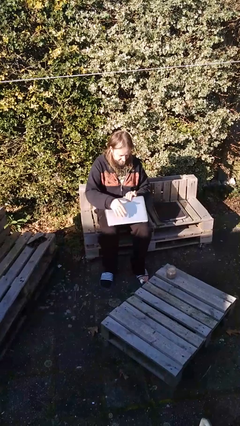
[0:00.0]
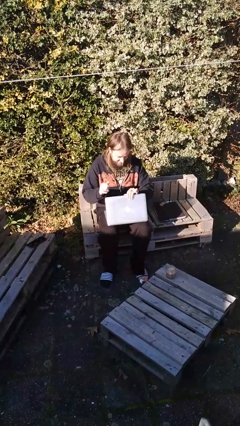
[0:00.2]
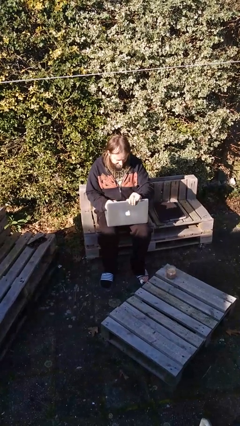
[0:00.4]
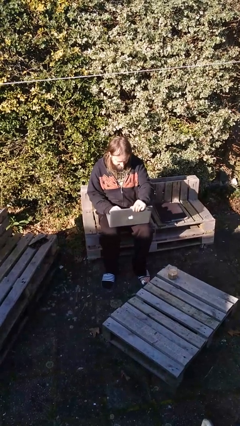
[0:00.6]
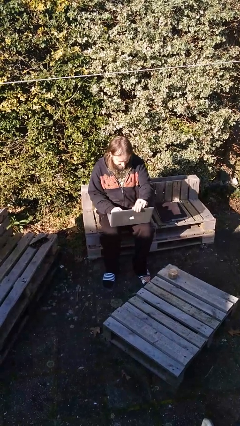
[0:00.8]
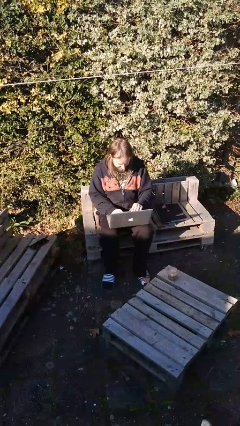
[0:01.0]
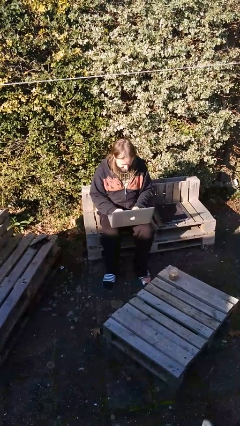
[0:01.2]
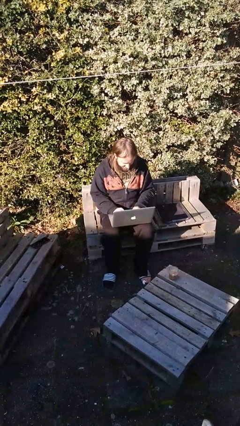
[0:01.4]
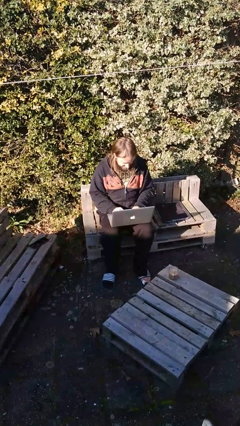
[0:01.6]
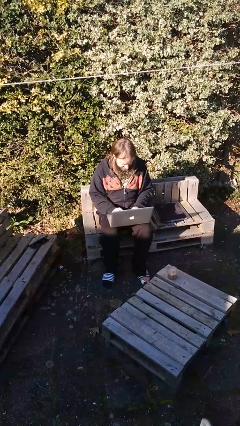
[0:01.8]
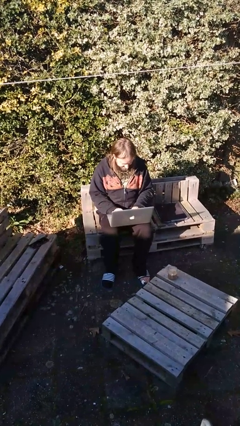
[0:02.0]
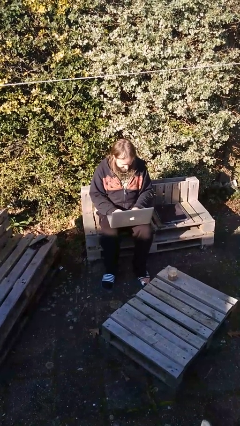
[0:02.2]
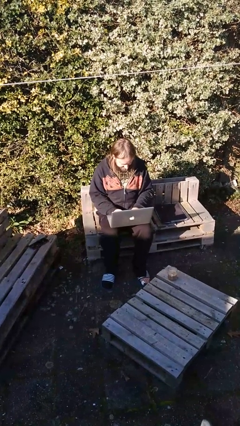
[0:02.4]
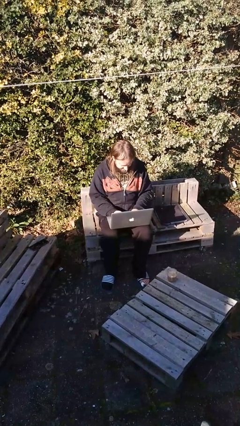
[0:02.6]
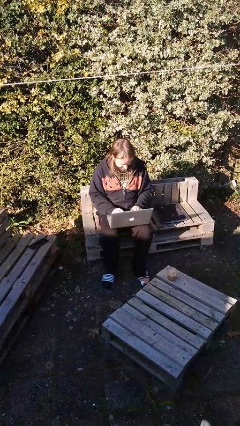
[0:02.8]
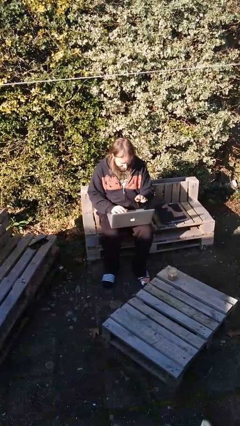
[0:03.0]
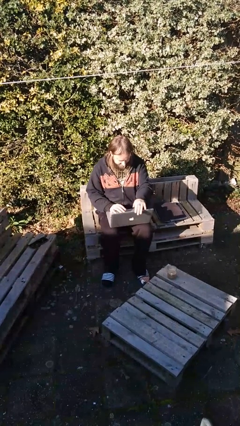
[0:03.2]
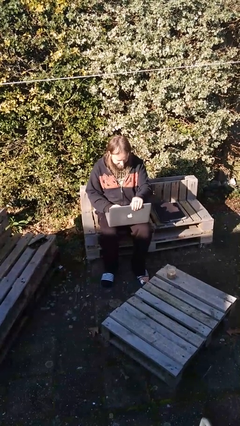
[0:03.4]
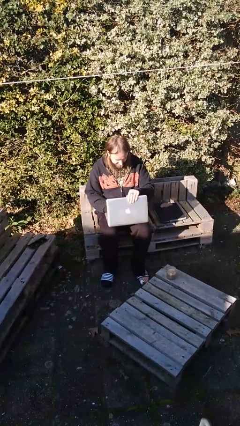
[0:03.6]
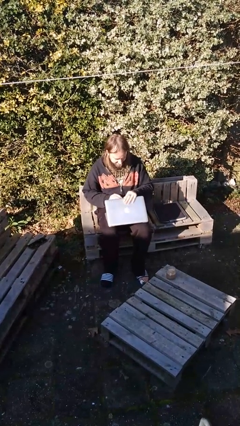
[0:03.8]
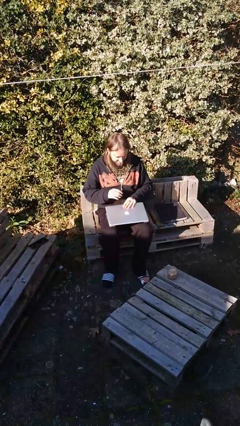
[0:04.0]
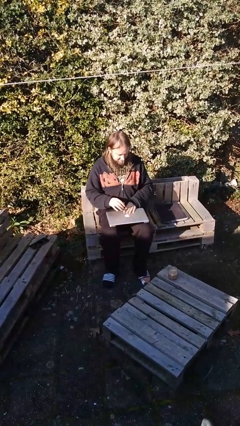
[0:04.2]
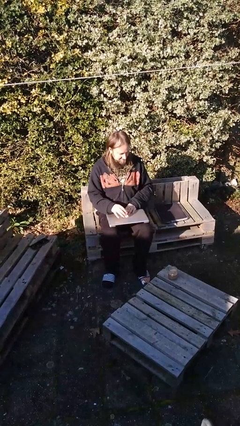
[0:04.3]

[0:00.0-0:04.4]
person interacts with laptop

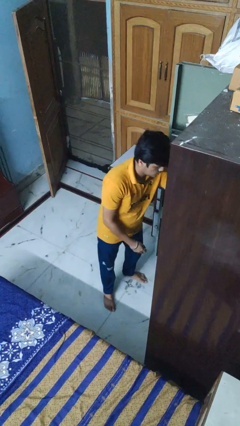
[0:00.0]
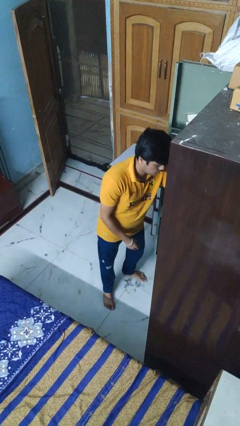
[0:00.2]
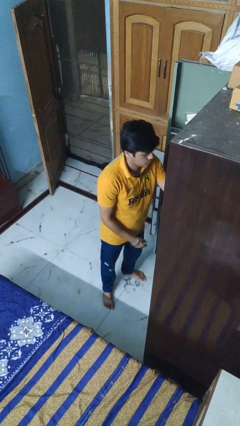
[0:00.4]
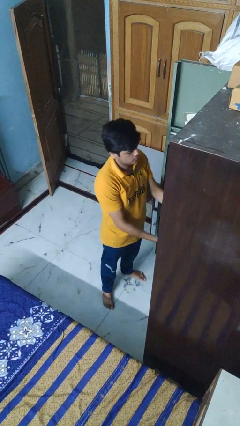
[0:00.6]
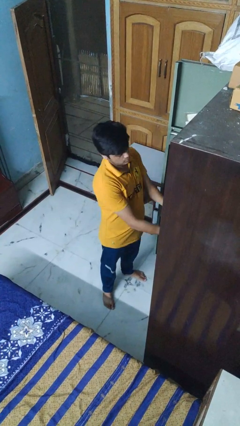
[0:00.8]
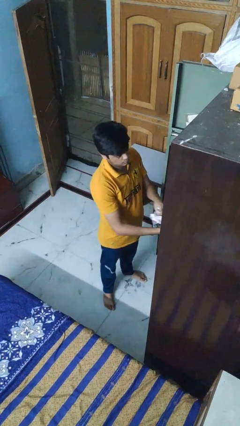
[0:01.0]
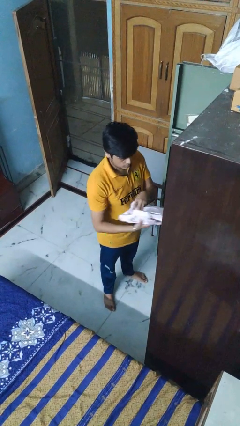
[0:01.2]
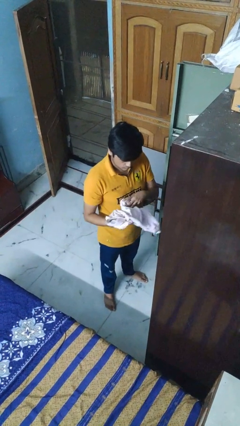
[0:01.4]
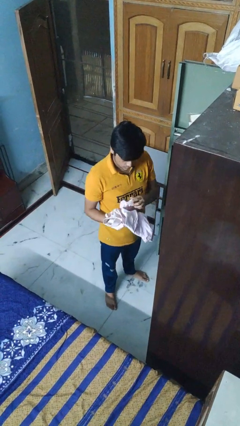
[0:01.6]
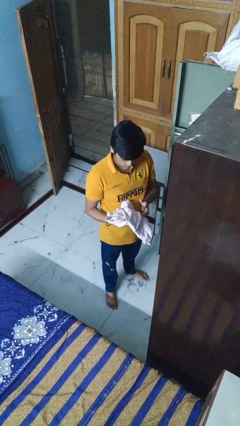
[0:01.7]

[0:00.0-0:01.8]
person takes clothes from dresser

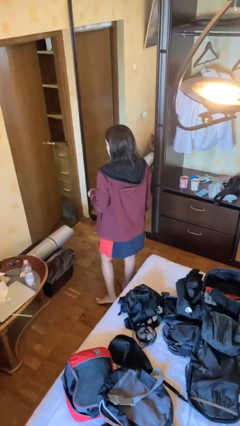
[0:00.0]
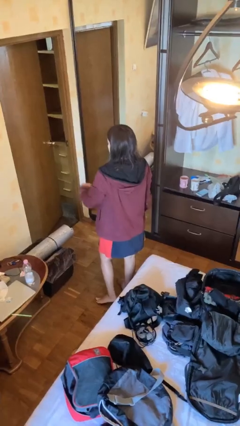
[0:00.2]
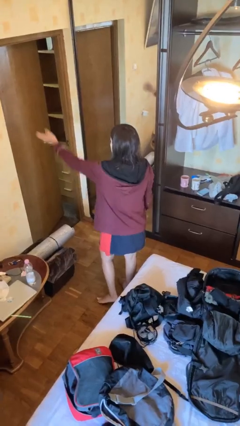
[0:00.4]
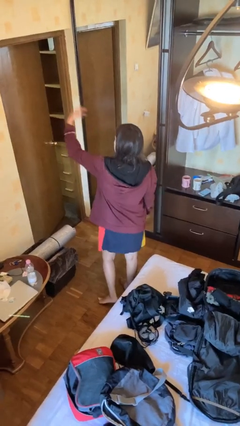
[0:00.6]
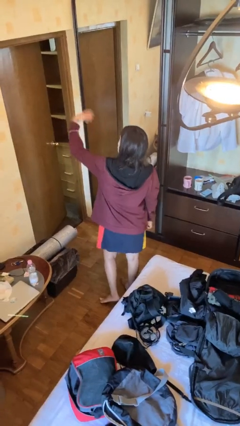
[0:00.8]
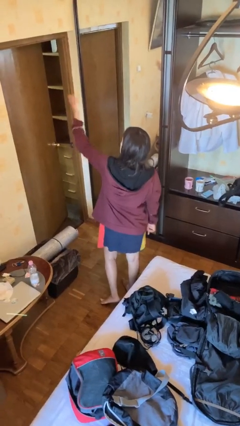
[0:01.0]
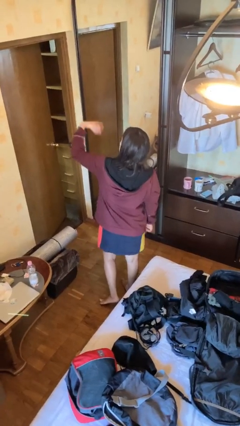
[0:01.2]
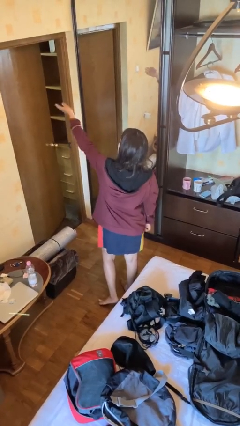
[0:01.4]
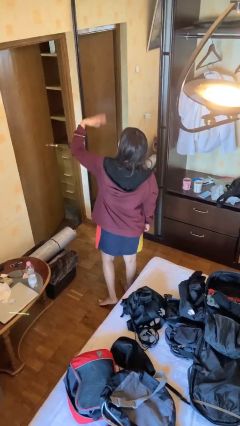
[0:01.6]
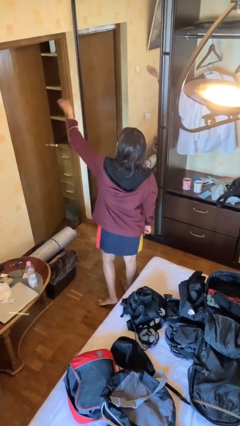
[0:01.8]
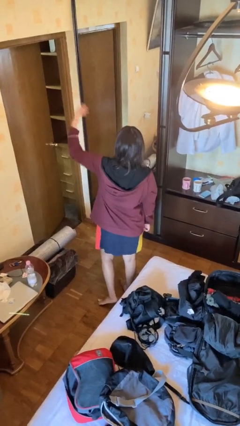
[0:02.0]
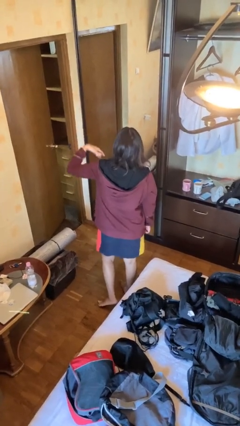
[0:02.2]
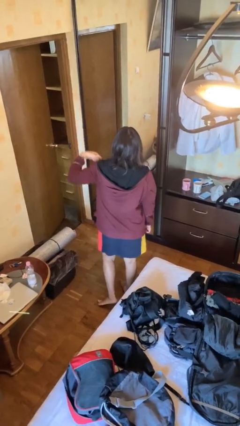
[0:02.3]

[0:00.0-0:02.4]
person gestures come here

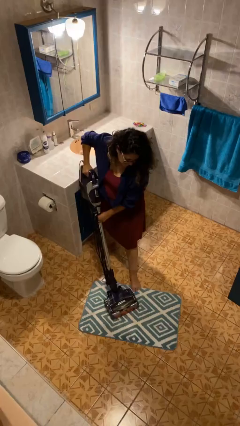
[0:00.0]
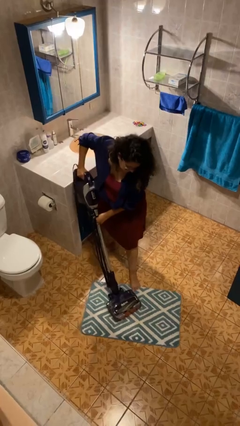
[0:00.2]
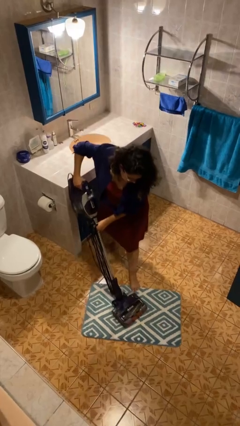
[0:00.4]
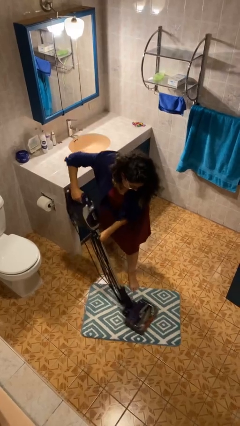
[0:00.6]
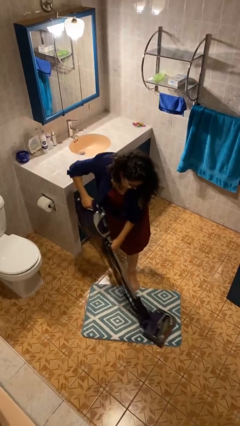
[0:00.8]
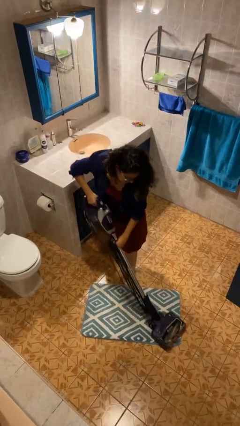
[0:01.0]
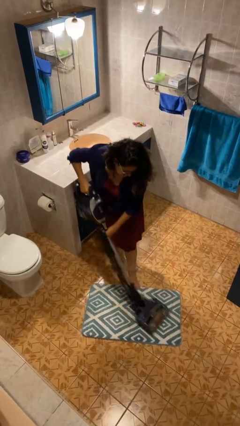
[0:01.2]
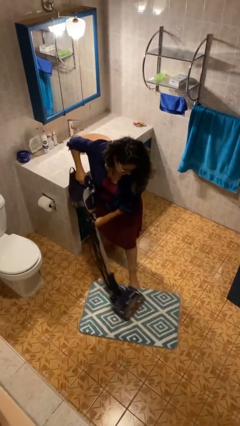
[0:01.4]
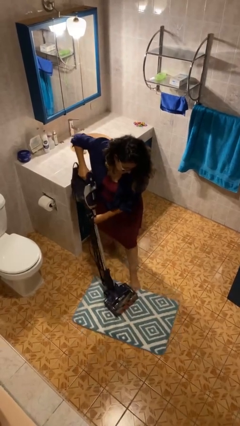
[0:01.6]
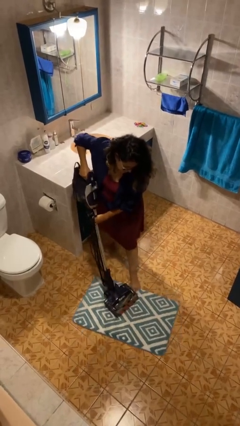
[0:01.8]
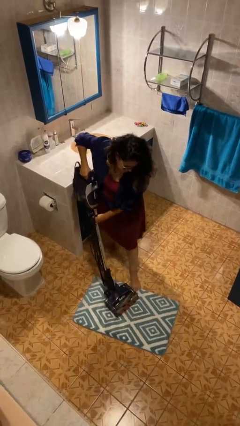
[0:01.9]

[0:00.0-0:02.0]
person vacuums carpet

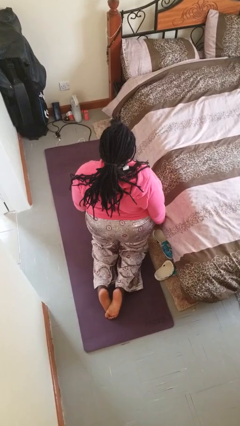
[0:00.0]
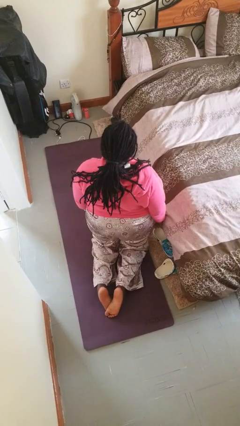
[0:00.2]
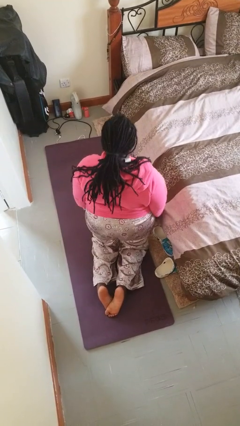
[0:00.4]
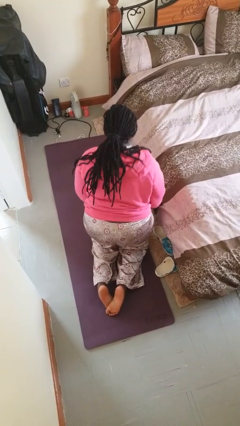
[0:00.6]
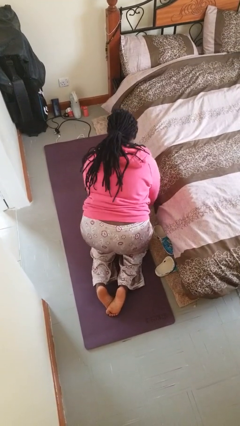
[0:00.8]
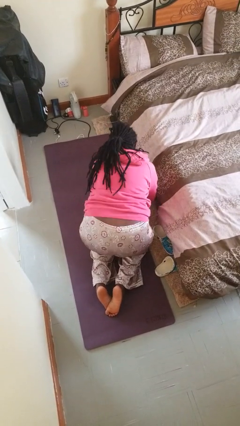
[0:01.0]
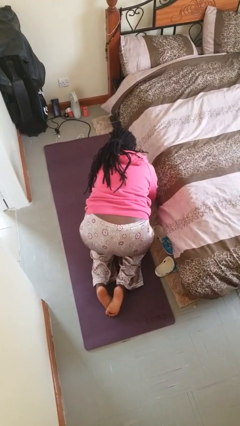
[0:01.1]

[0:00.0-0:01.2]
person searches under bed

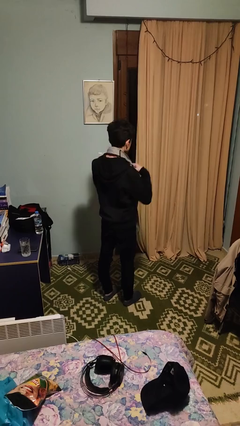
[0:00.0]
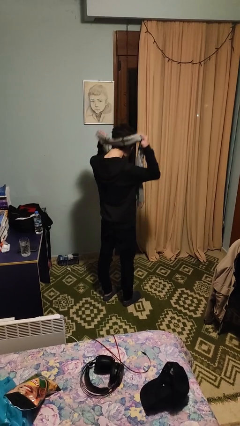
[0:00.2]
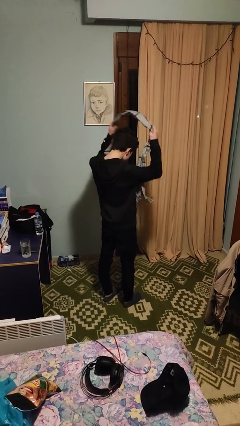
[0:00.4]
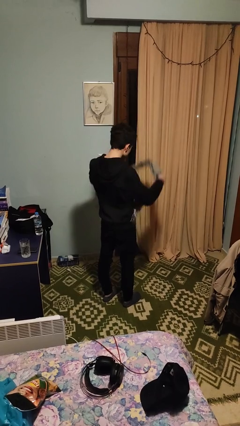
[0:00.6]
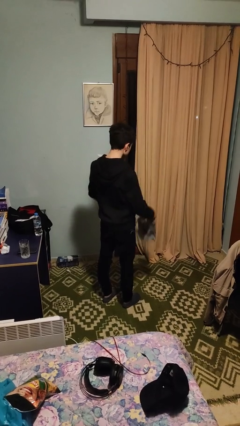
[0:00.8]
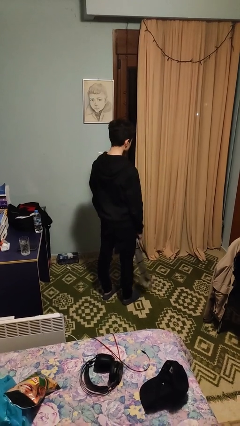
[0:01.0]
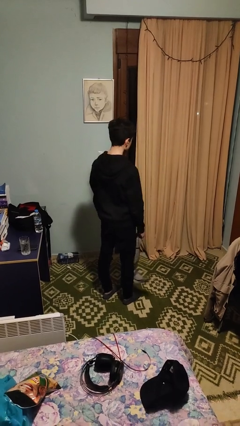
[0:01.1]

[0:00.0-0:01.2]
person takes off scarf

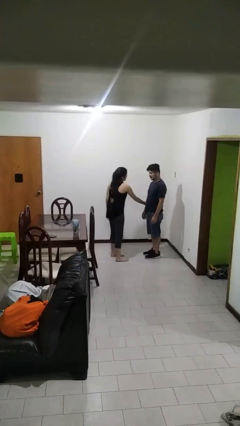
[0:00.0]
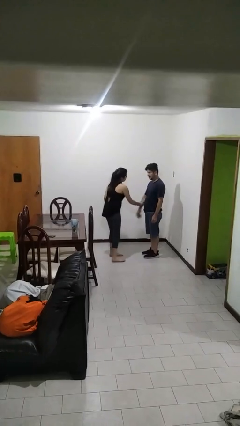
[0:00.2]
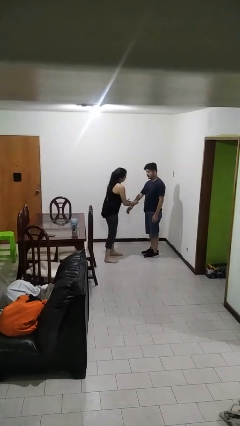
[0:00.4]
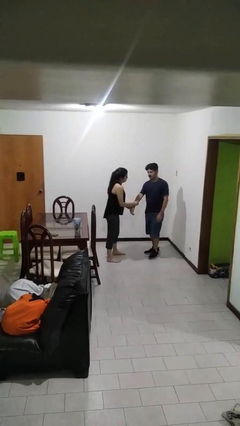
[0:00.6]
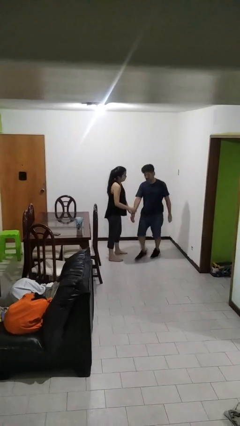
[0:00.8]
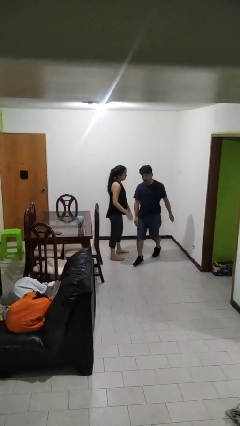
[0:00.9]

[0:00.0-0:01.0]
person grabs person by forearm

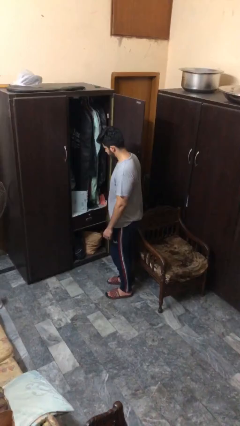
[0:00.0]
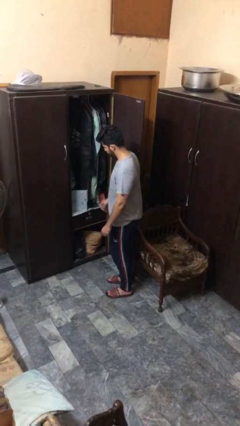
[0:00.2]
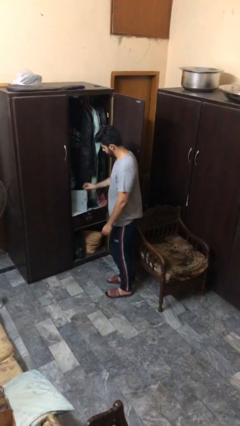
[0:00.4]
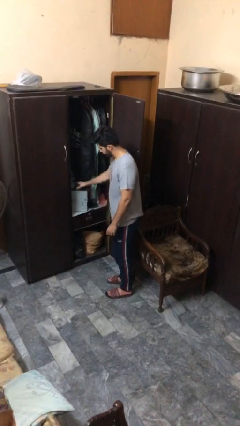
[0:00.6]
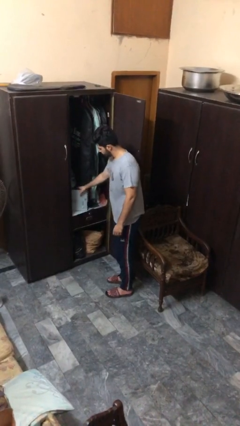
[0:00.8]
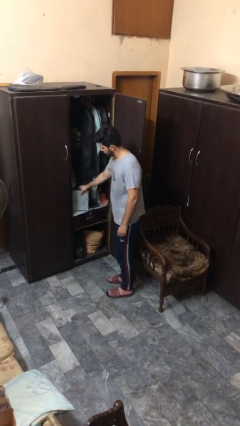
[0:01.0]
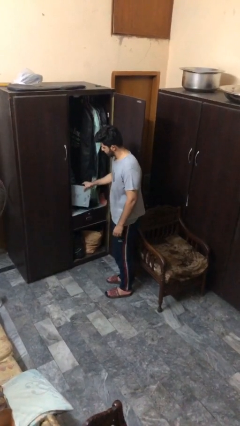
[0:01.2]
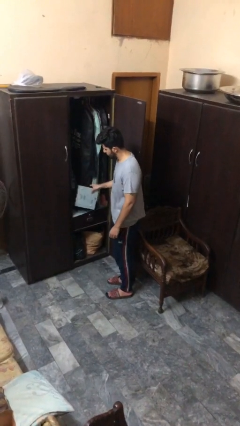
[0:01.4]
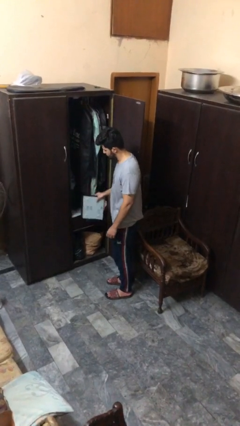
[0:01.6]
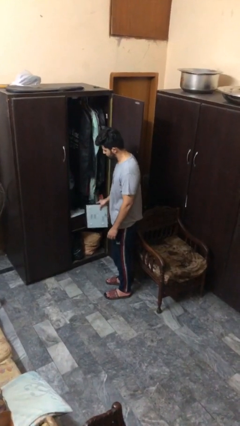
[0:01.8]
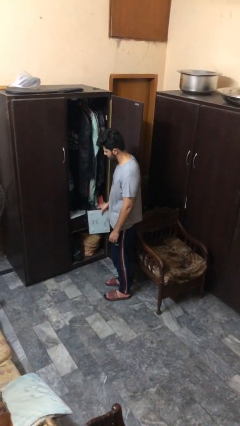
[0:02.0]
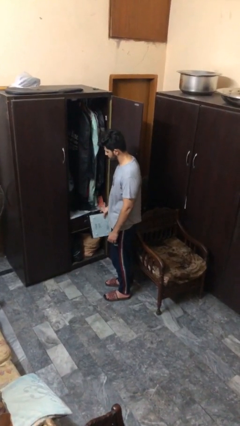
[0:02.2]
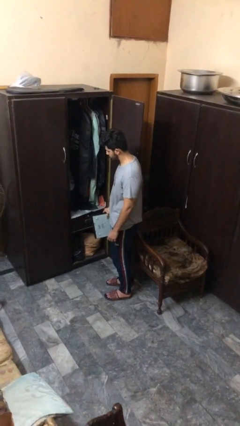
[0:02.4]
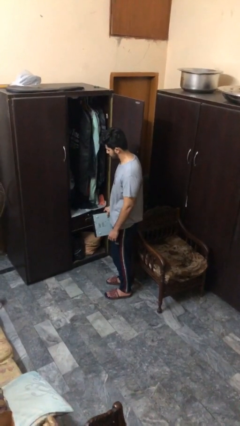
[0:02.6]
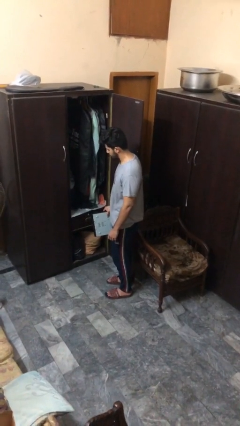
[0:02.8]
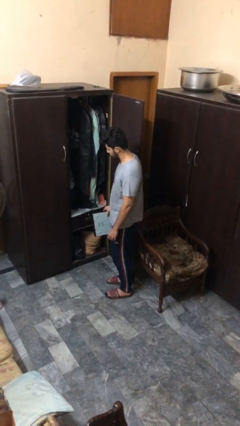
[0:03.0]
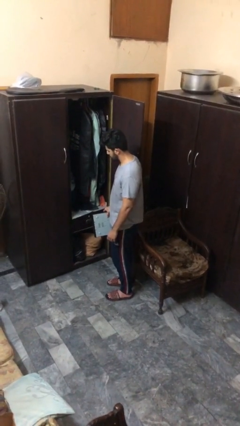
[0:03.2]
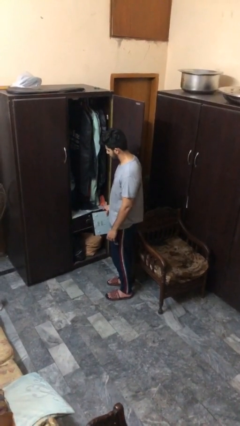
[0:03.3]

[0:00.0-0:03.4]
person picks up object from countertop
